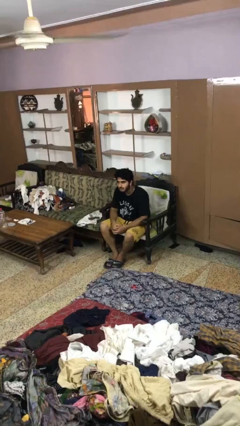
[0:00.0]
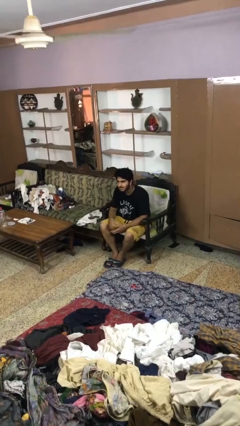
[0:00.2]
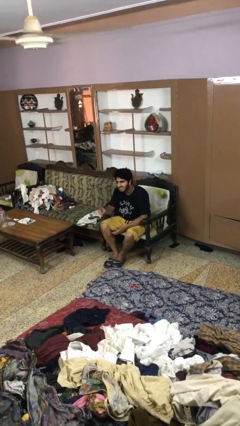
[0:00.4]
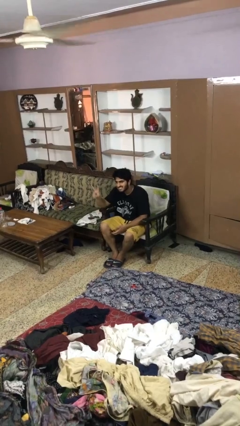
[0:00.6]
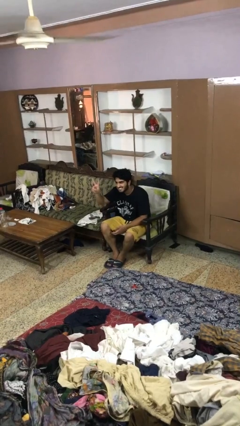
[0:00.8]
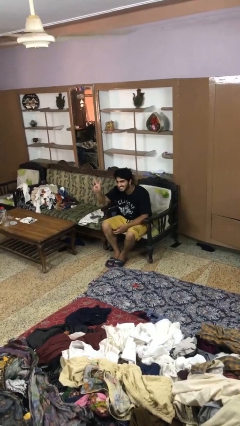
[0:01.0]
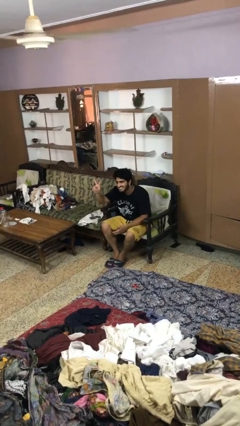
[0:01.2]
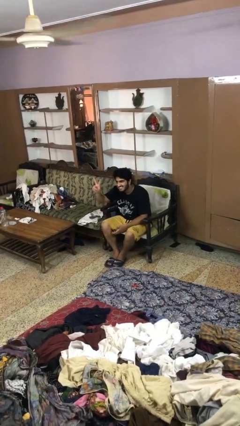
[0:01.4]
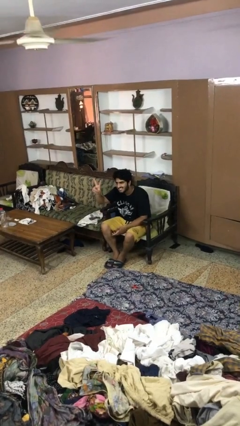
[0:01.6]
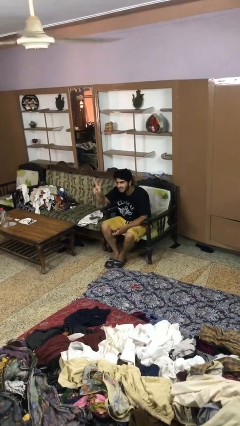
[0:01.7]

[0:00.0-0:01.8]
person gestures peace

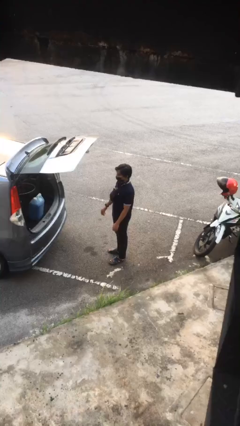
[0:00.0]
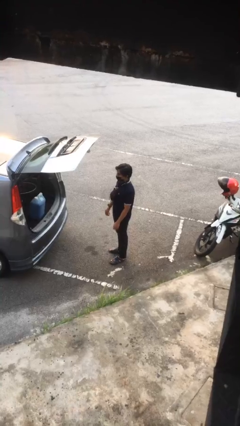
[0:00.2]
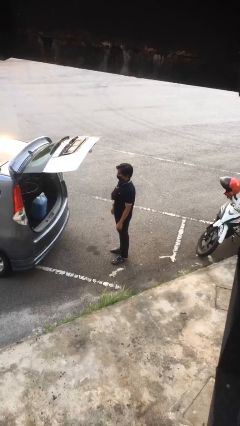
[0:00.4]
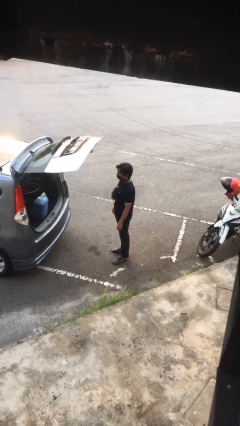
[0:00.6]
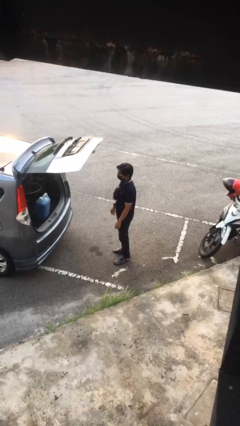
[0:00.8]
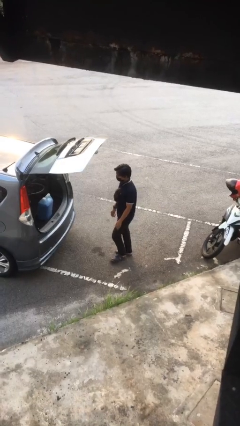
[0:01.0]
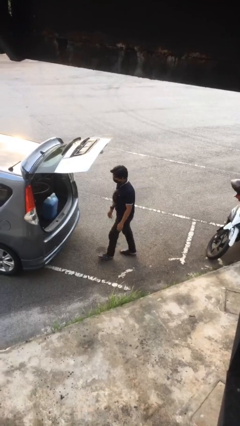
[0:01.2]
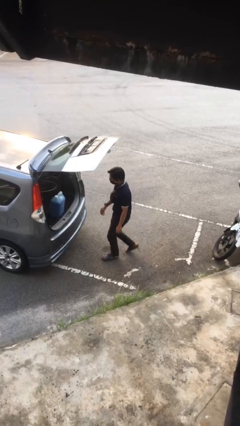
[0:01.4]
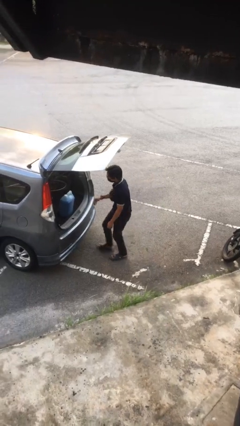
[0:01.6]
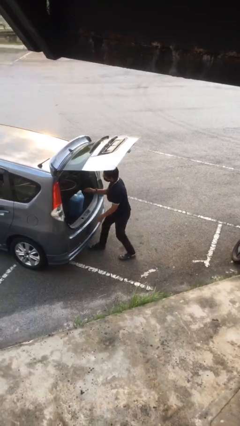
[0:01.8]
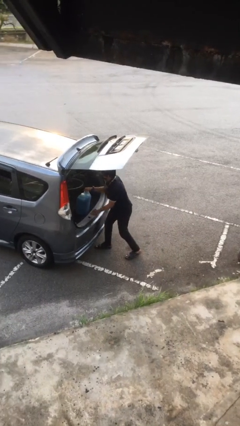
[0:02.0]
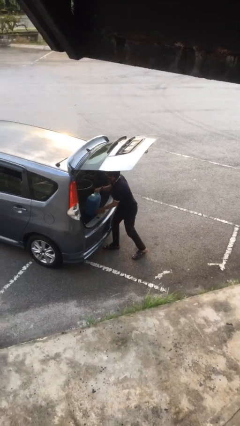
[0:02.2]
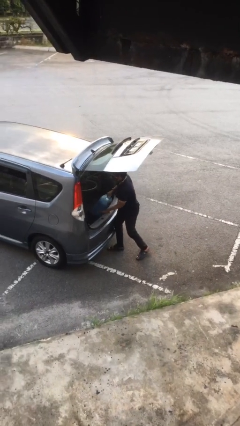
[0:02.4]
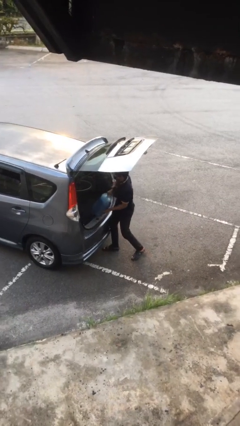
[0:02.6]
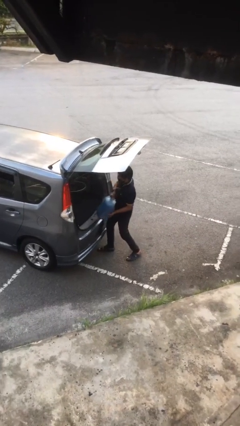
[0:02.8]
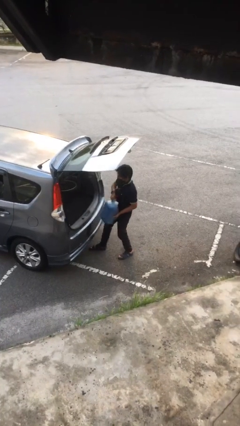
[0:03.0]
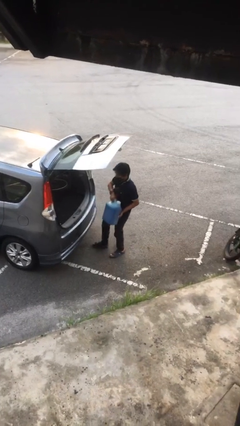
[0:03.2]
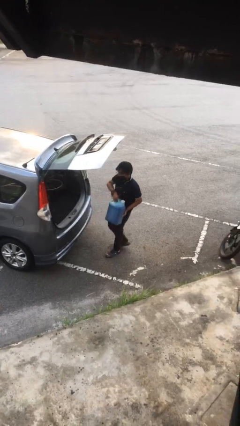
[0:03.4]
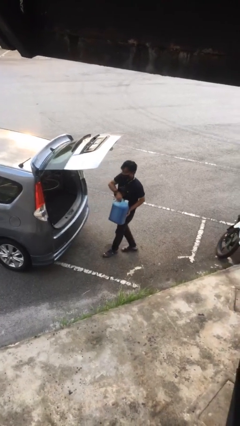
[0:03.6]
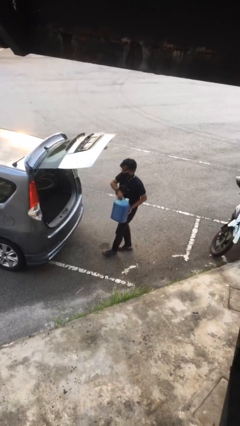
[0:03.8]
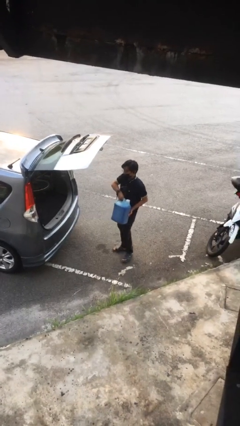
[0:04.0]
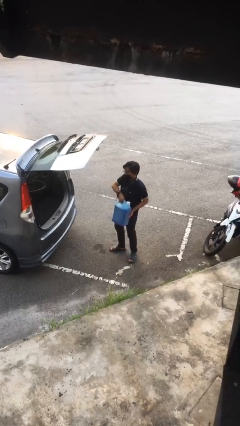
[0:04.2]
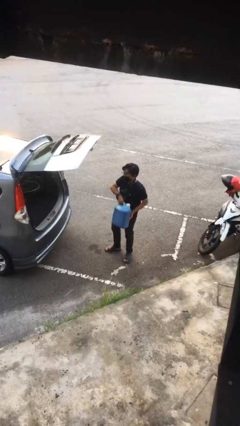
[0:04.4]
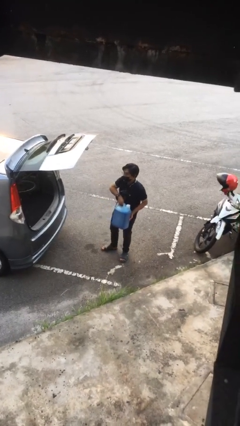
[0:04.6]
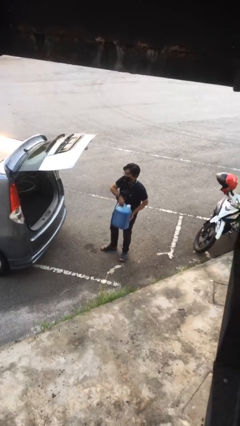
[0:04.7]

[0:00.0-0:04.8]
person unloads car

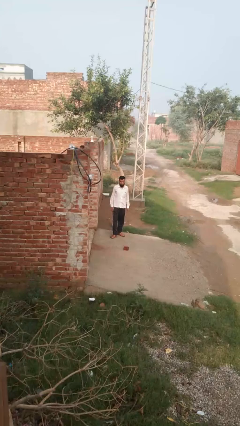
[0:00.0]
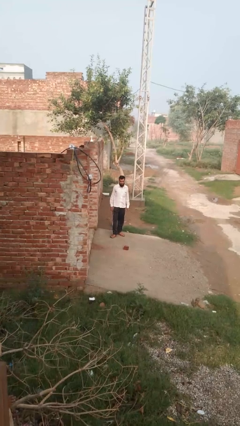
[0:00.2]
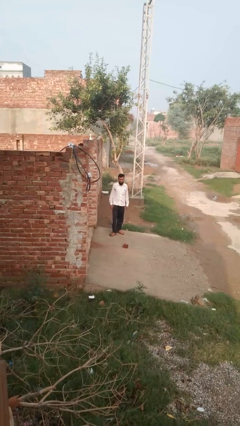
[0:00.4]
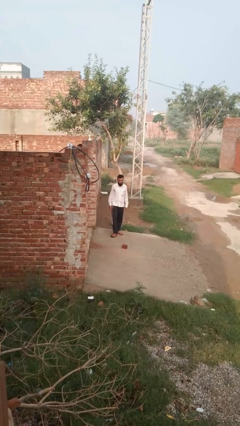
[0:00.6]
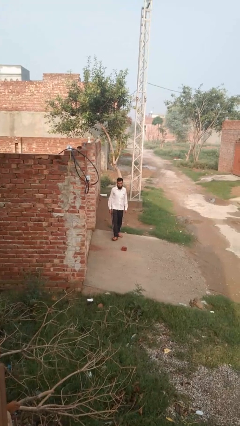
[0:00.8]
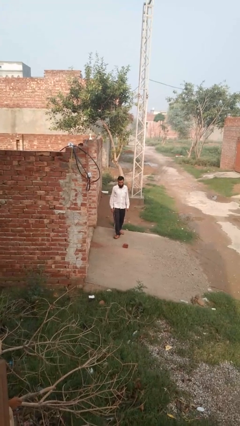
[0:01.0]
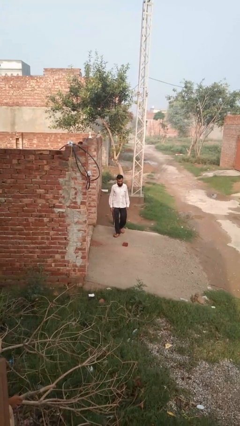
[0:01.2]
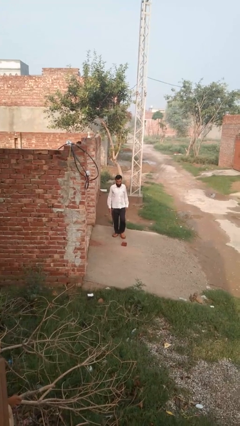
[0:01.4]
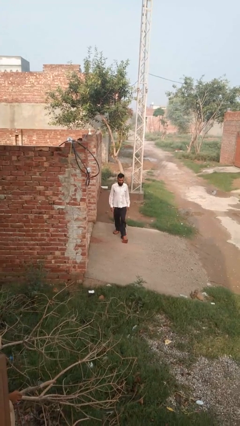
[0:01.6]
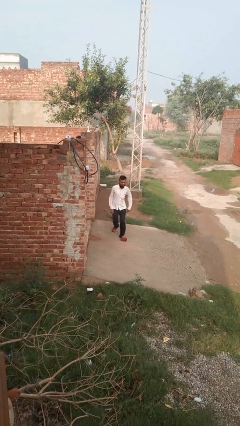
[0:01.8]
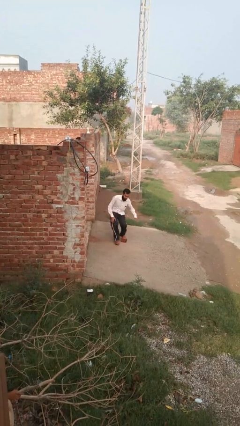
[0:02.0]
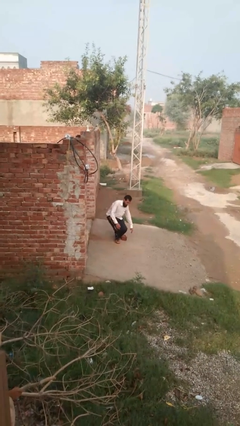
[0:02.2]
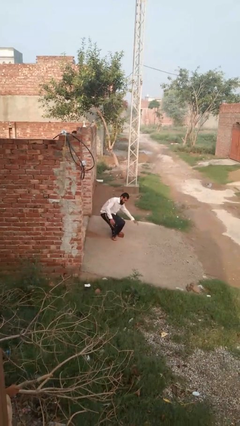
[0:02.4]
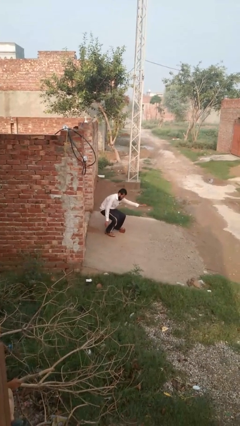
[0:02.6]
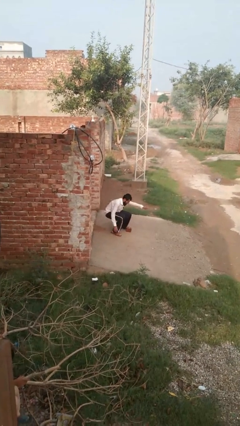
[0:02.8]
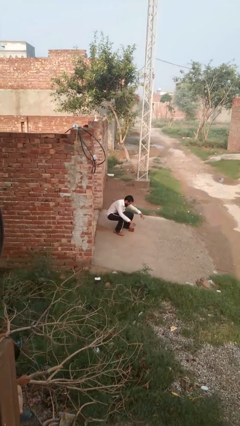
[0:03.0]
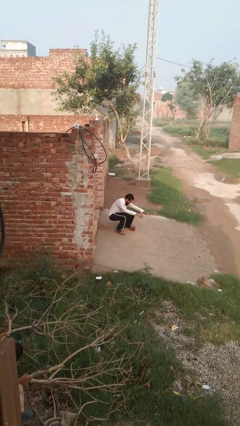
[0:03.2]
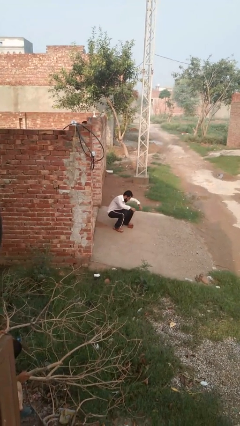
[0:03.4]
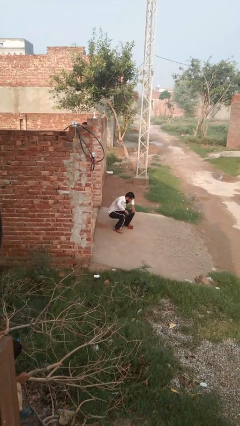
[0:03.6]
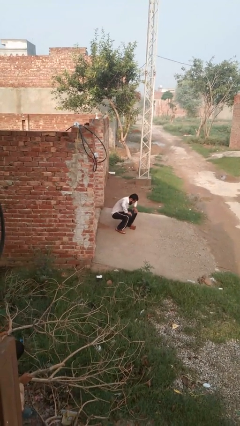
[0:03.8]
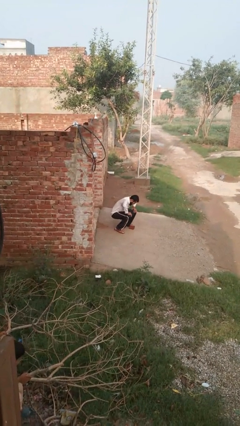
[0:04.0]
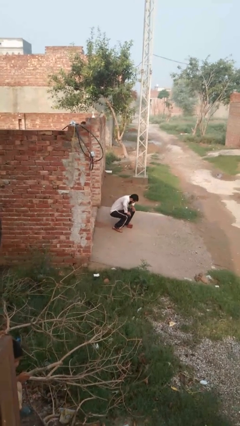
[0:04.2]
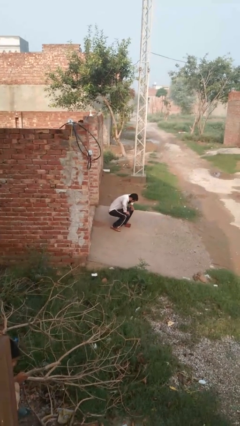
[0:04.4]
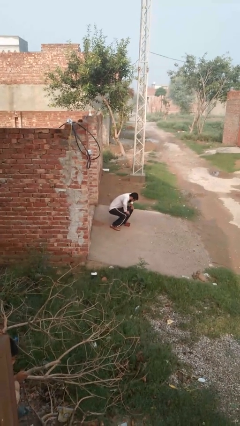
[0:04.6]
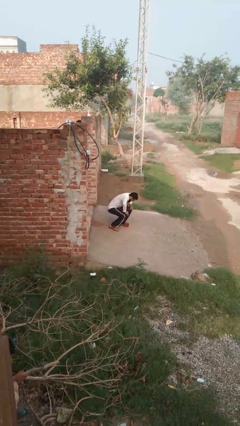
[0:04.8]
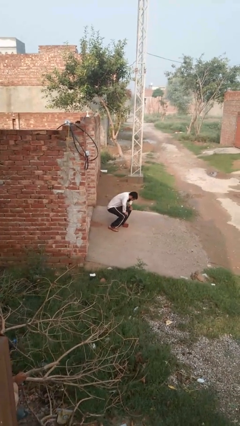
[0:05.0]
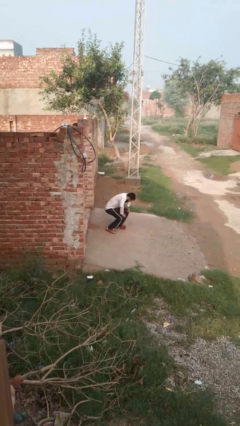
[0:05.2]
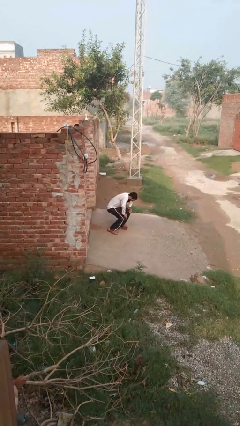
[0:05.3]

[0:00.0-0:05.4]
person trips on object on floor

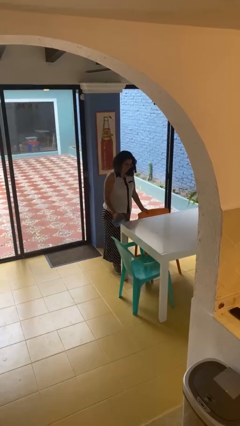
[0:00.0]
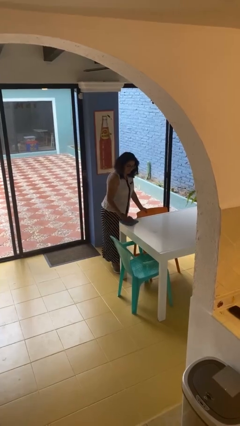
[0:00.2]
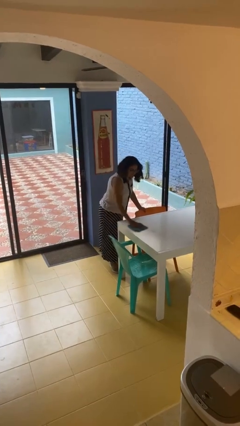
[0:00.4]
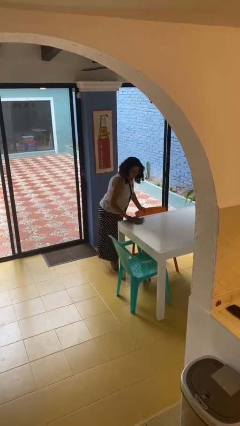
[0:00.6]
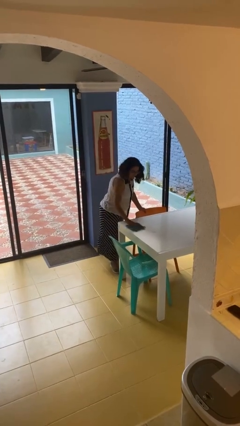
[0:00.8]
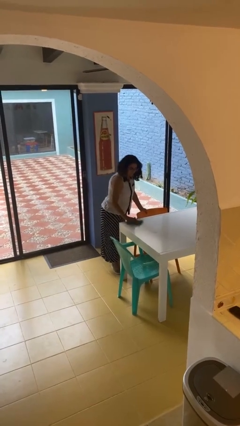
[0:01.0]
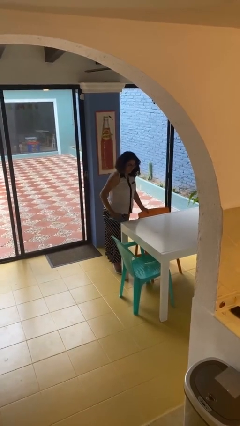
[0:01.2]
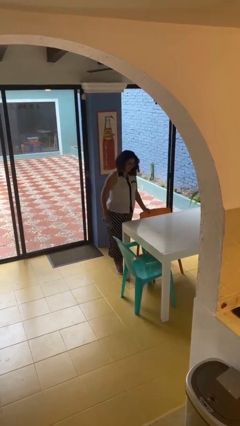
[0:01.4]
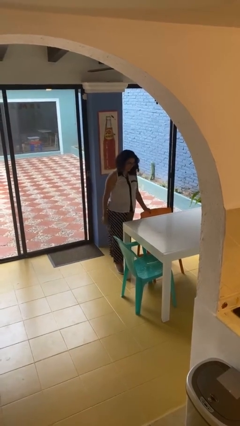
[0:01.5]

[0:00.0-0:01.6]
person cleans table with rag

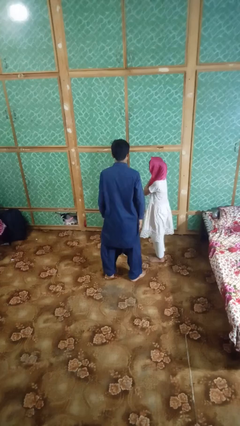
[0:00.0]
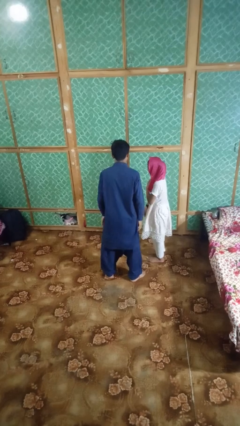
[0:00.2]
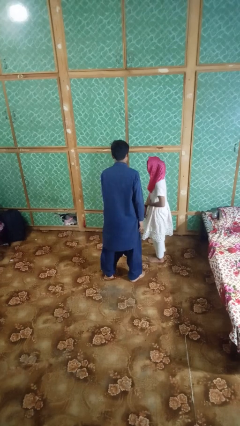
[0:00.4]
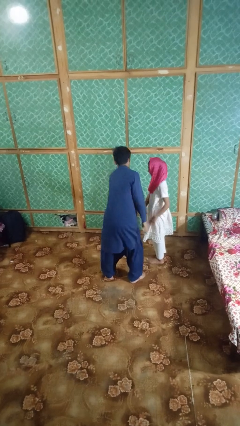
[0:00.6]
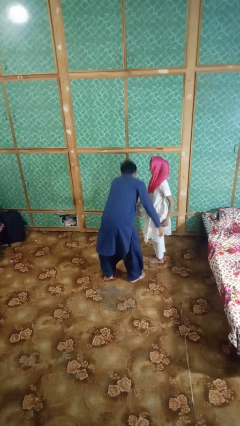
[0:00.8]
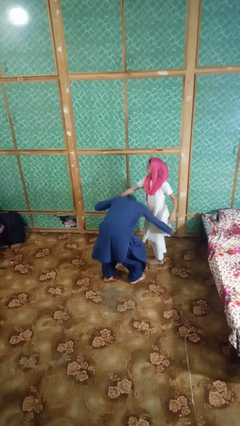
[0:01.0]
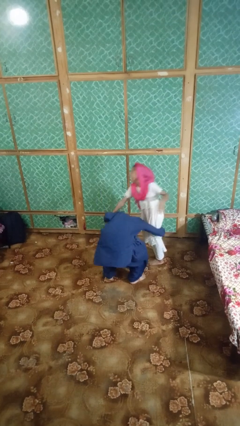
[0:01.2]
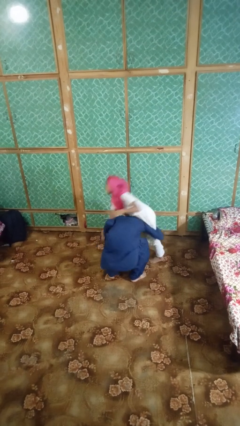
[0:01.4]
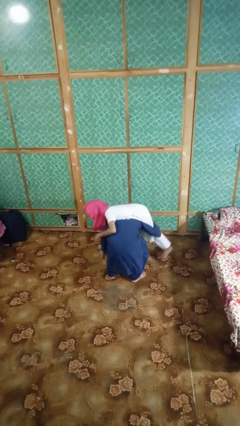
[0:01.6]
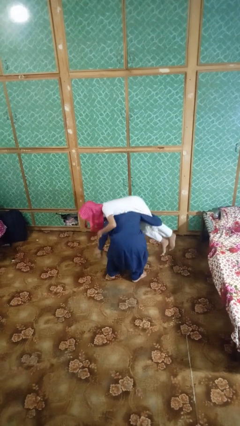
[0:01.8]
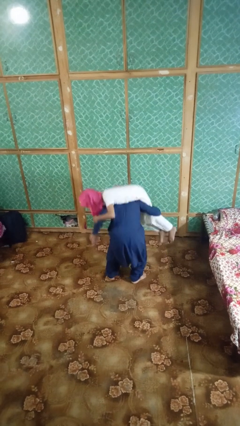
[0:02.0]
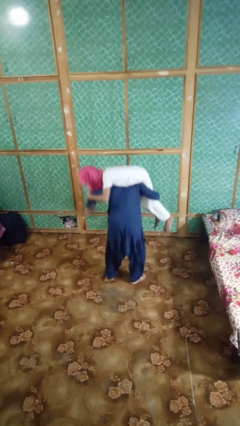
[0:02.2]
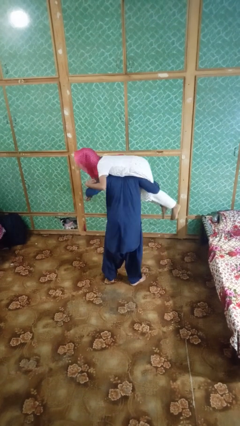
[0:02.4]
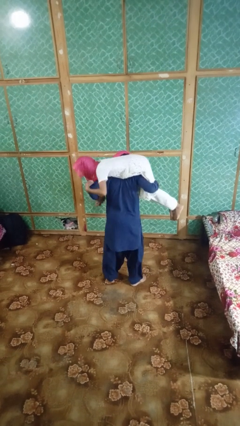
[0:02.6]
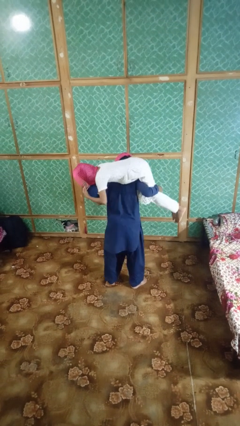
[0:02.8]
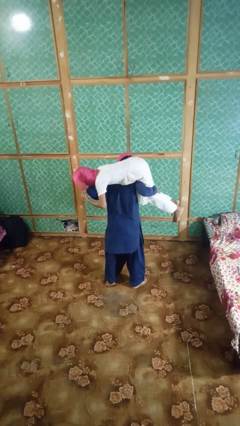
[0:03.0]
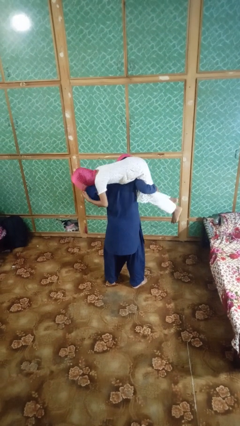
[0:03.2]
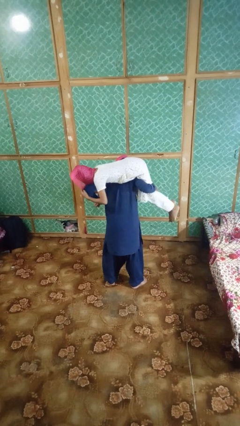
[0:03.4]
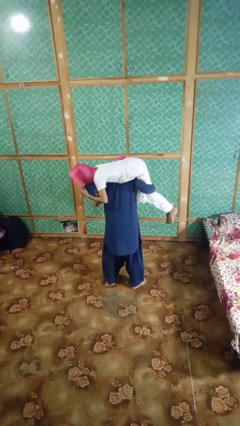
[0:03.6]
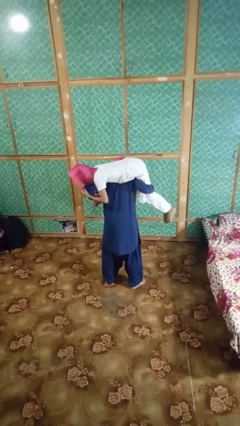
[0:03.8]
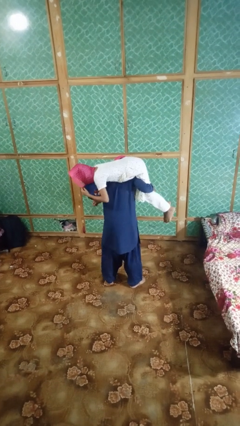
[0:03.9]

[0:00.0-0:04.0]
person carries person on shoulders
